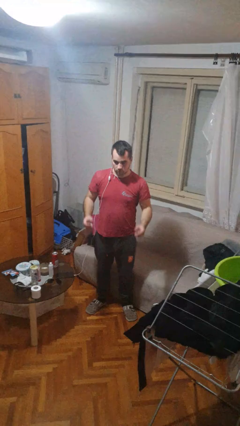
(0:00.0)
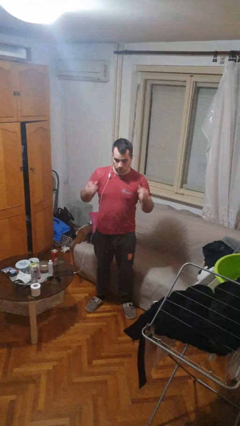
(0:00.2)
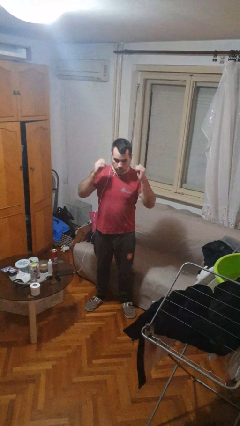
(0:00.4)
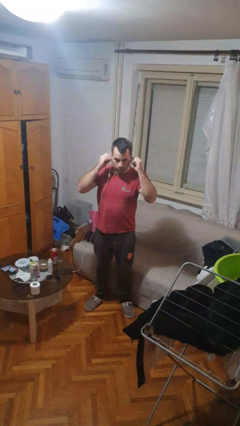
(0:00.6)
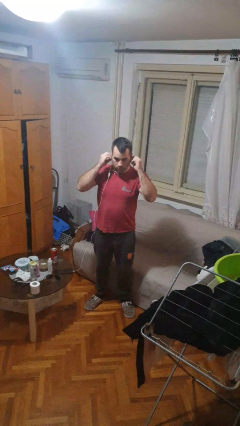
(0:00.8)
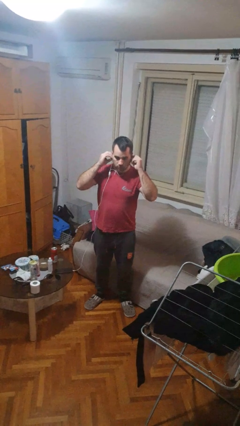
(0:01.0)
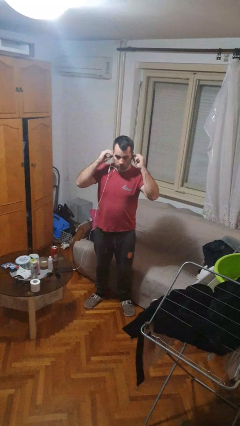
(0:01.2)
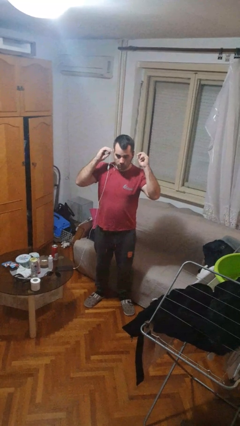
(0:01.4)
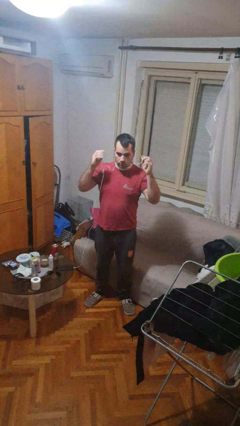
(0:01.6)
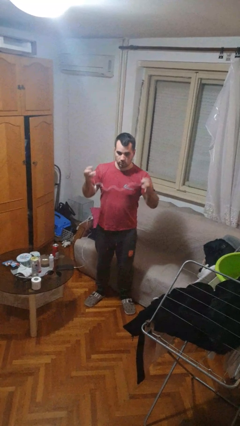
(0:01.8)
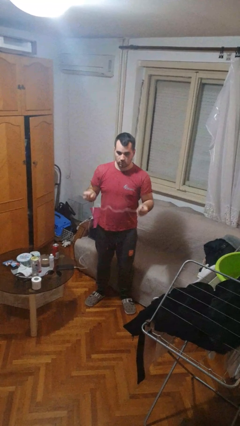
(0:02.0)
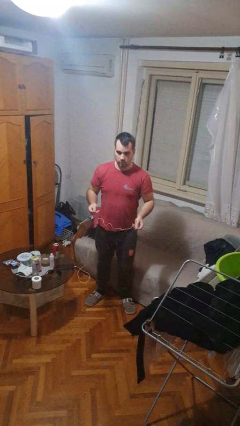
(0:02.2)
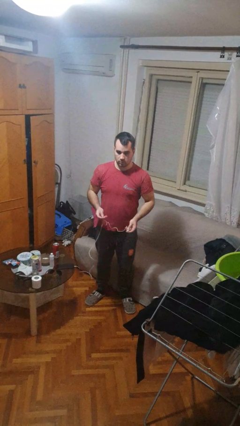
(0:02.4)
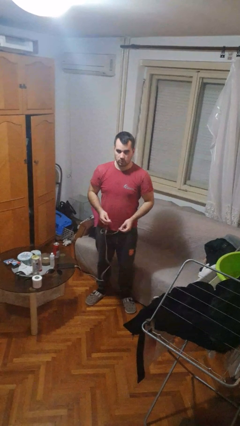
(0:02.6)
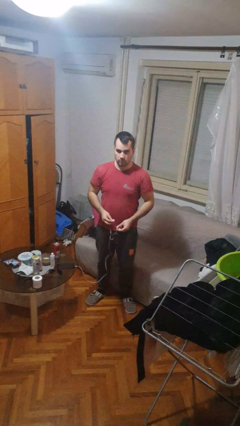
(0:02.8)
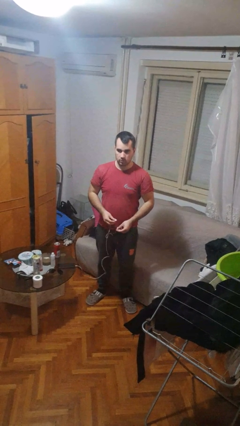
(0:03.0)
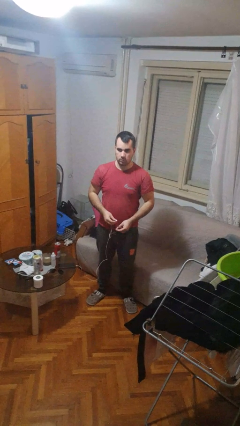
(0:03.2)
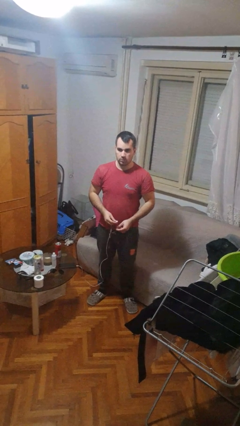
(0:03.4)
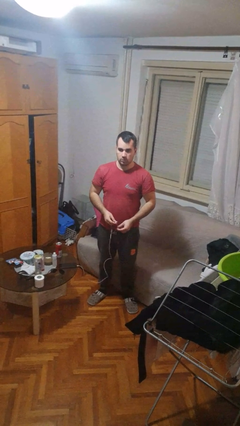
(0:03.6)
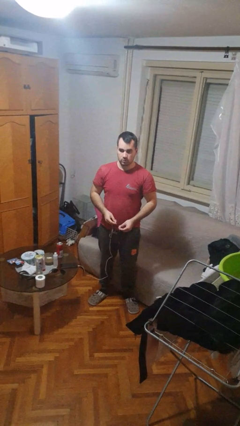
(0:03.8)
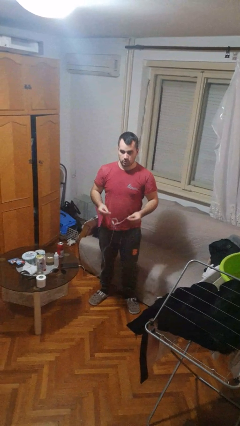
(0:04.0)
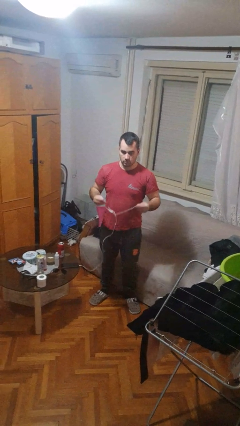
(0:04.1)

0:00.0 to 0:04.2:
person takes off headphones

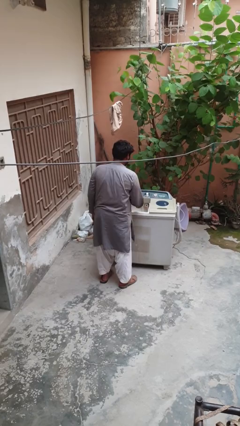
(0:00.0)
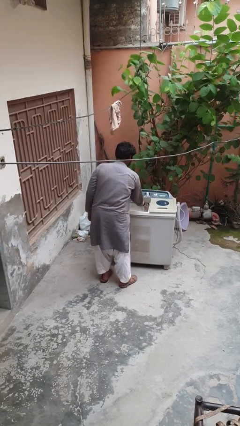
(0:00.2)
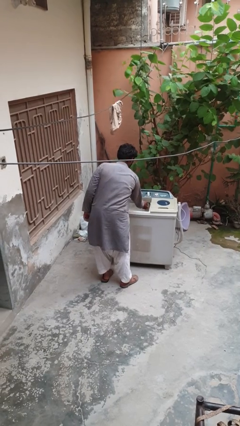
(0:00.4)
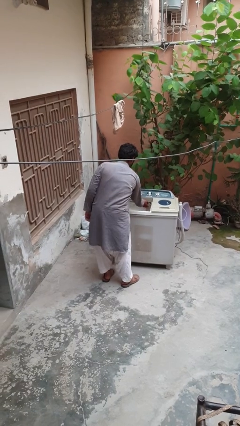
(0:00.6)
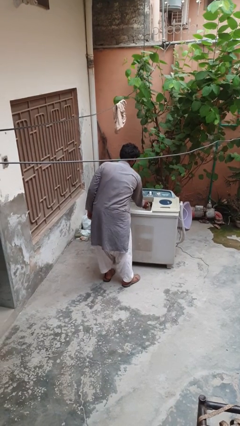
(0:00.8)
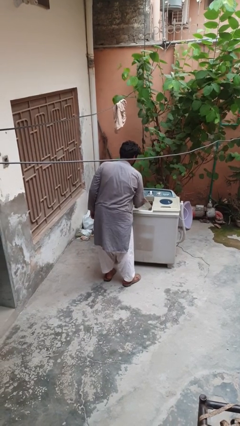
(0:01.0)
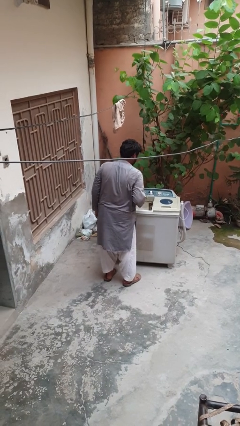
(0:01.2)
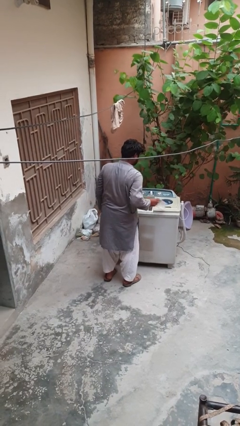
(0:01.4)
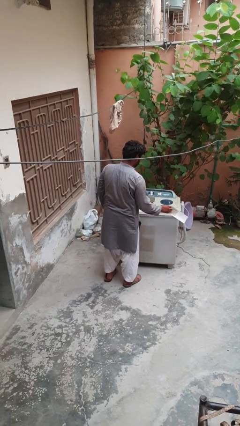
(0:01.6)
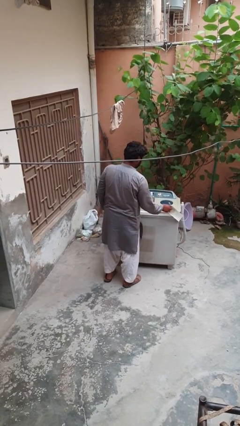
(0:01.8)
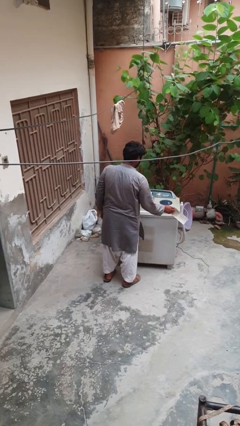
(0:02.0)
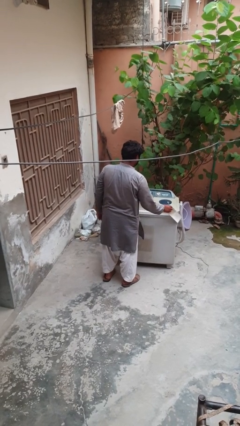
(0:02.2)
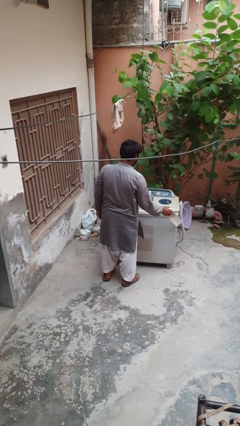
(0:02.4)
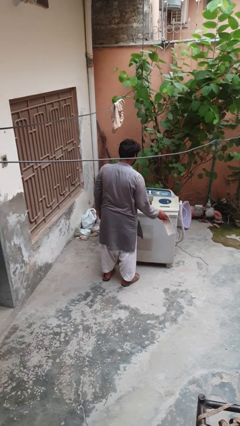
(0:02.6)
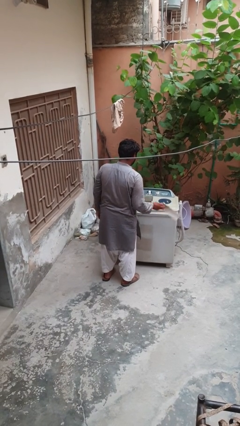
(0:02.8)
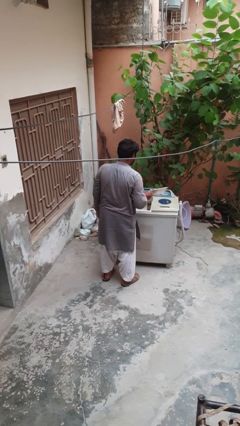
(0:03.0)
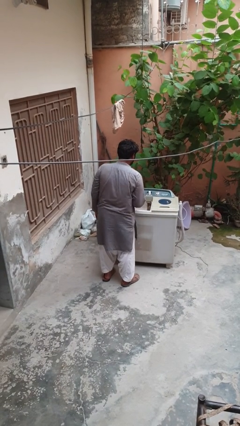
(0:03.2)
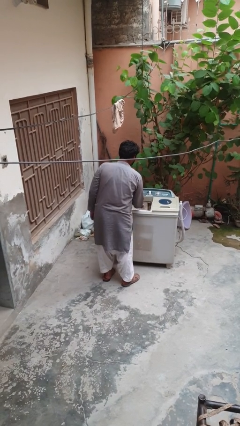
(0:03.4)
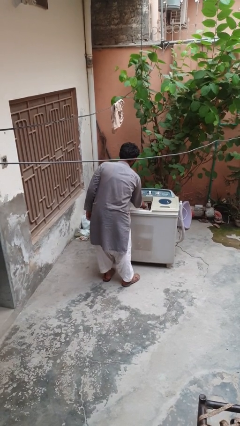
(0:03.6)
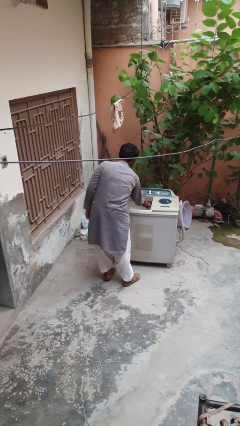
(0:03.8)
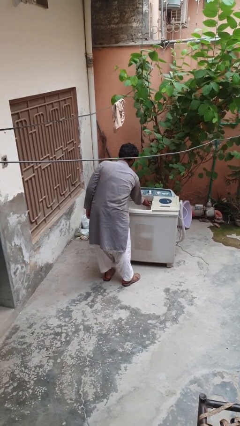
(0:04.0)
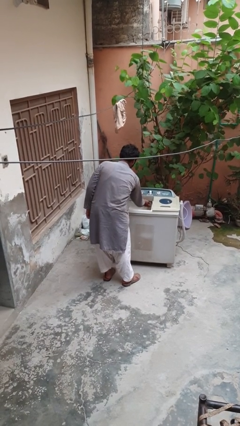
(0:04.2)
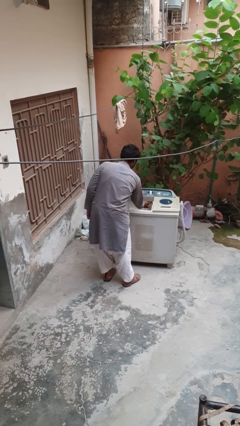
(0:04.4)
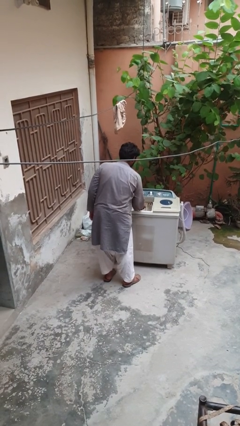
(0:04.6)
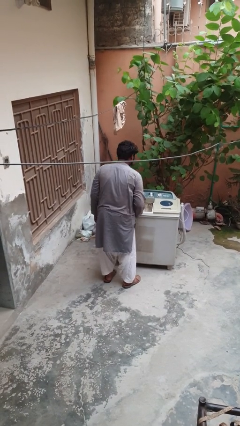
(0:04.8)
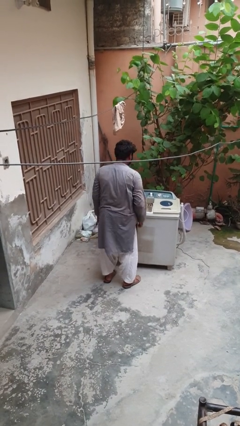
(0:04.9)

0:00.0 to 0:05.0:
person cleans dryer lint trap

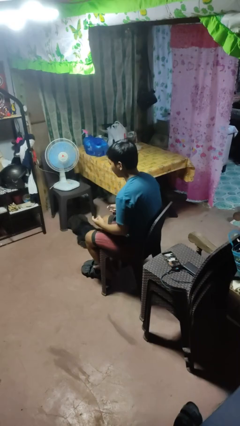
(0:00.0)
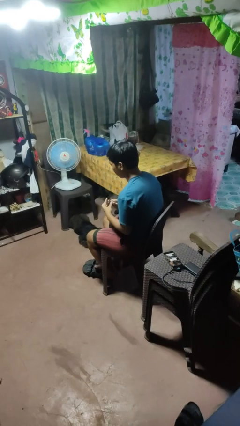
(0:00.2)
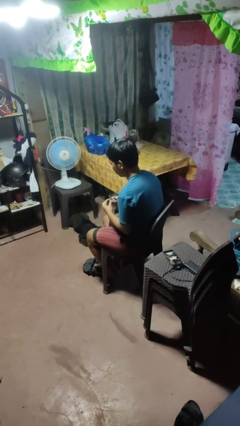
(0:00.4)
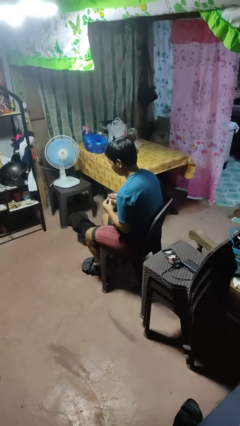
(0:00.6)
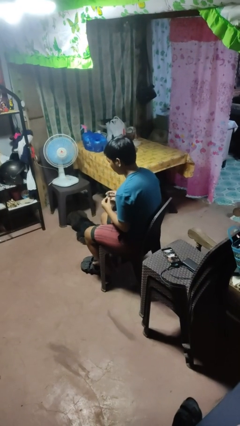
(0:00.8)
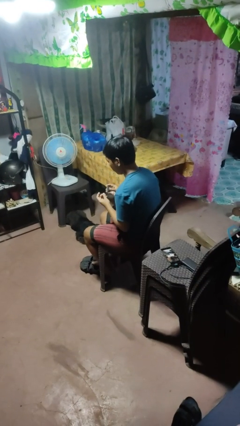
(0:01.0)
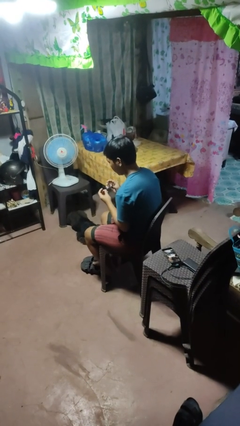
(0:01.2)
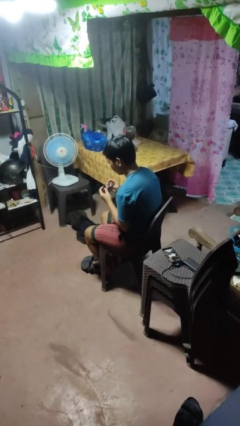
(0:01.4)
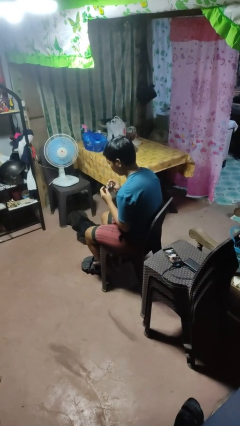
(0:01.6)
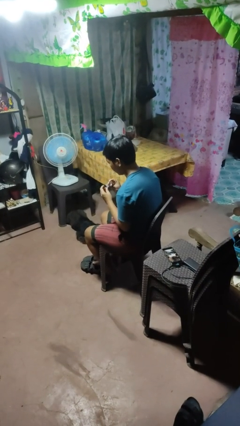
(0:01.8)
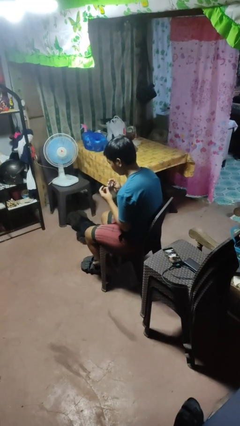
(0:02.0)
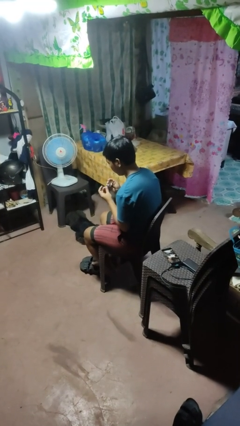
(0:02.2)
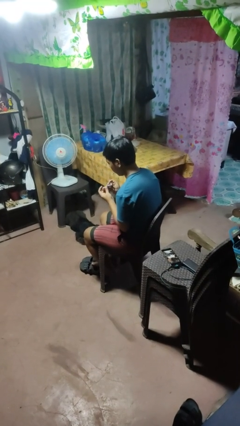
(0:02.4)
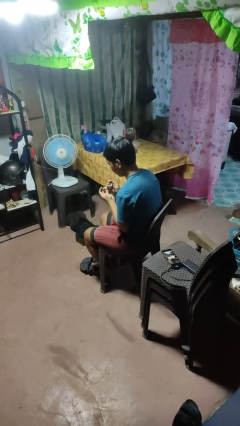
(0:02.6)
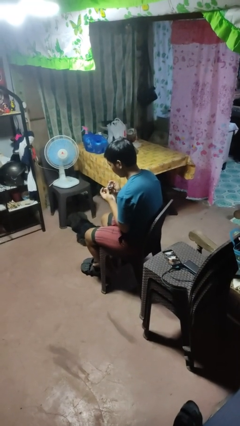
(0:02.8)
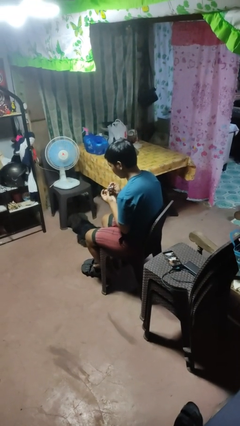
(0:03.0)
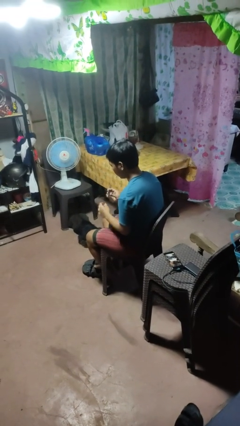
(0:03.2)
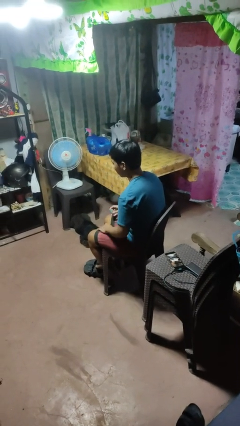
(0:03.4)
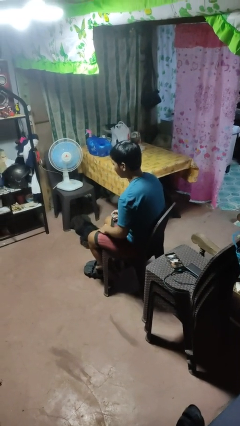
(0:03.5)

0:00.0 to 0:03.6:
person clips fingernails

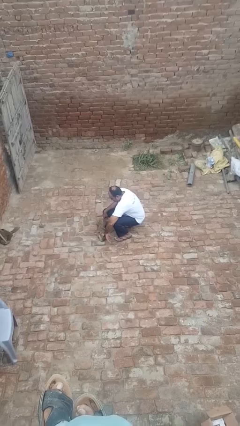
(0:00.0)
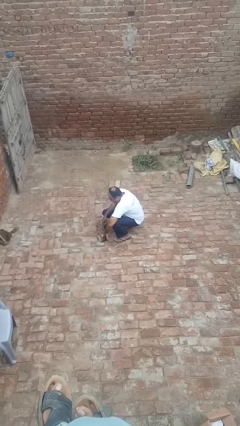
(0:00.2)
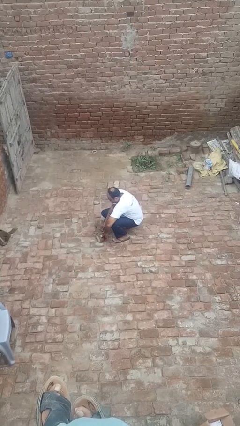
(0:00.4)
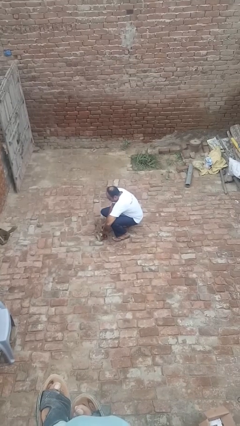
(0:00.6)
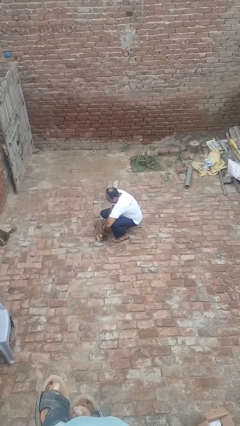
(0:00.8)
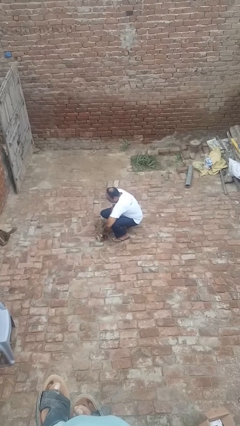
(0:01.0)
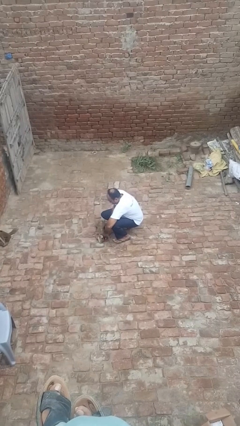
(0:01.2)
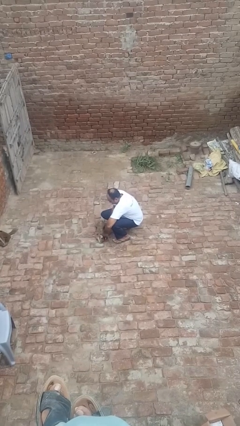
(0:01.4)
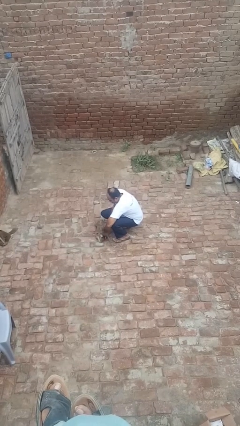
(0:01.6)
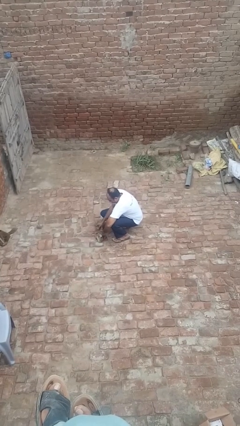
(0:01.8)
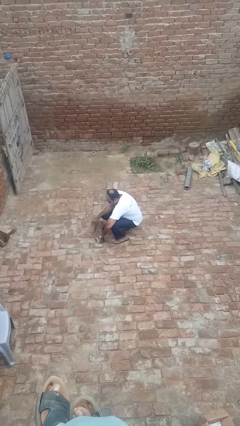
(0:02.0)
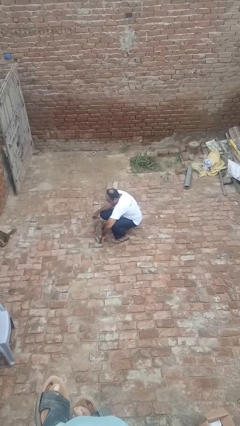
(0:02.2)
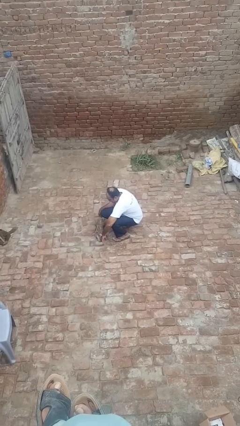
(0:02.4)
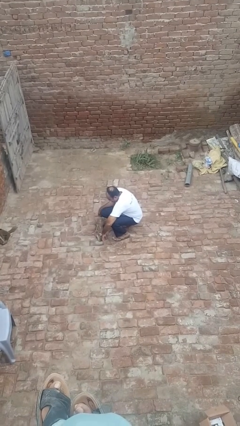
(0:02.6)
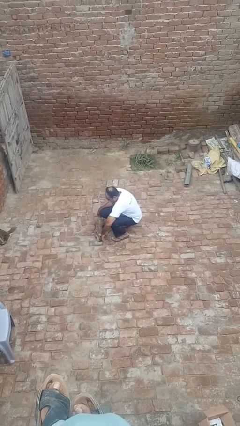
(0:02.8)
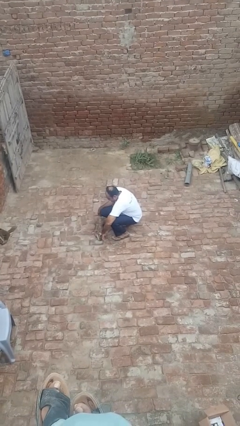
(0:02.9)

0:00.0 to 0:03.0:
person unattaches leash from dog

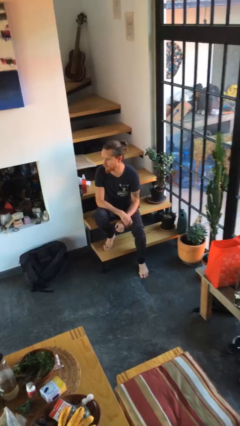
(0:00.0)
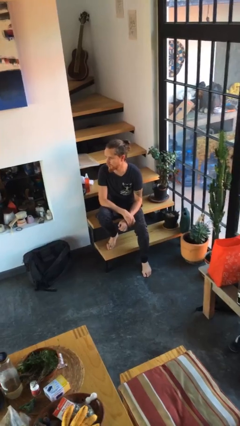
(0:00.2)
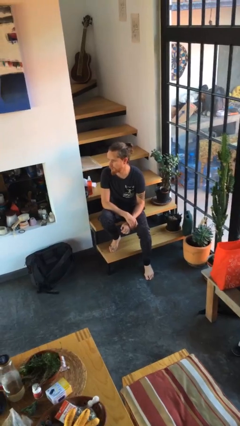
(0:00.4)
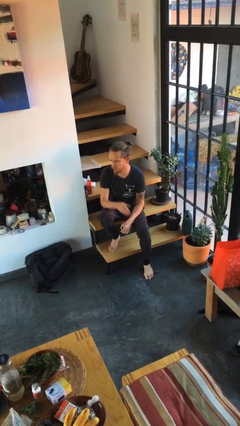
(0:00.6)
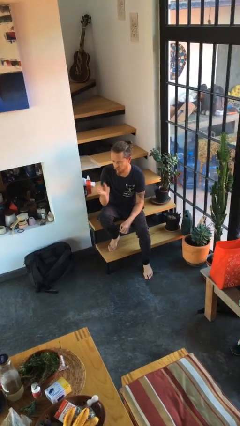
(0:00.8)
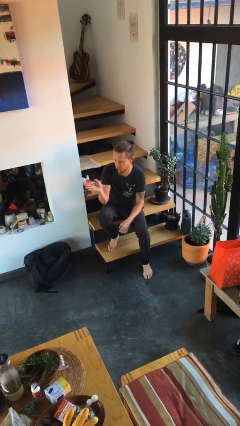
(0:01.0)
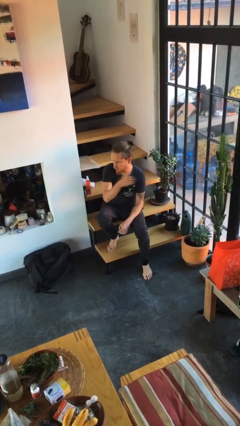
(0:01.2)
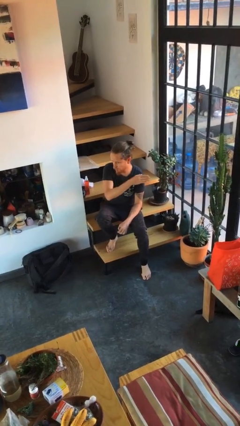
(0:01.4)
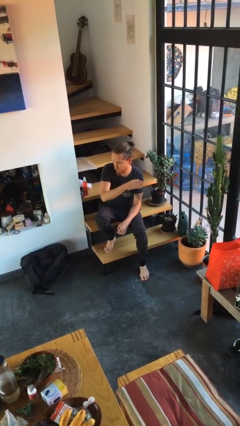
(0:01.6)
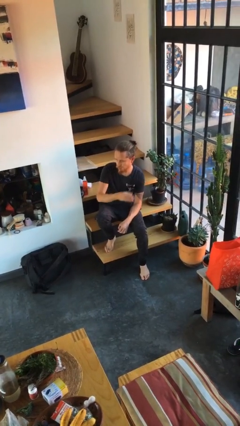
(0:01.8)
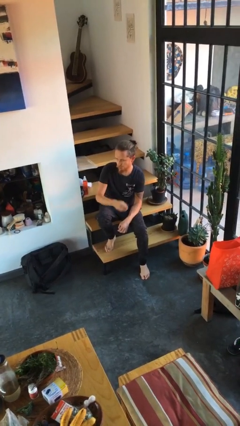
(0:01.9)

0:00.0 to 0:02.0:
person gestures swipe left
